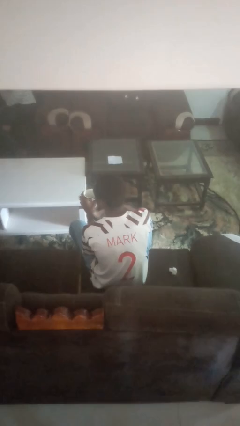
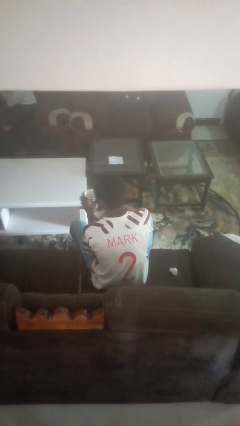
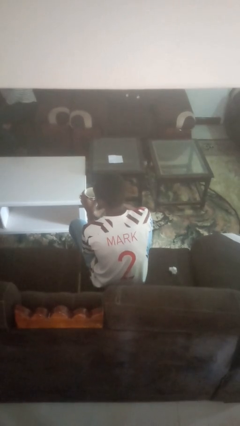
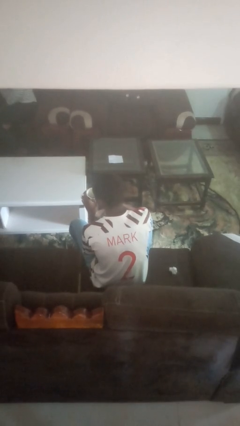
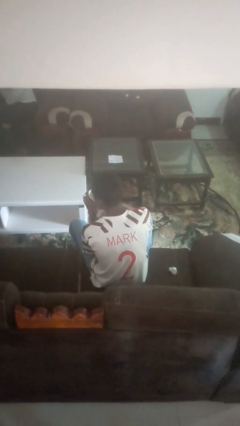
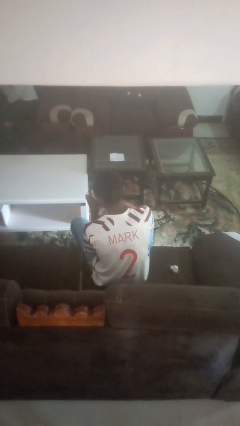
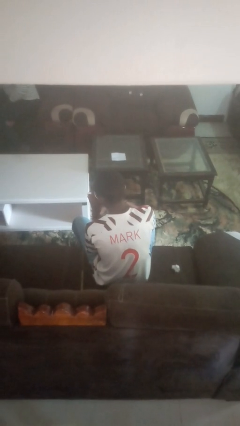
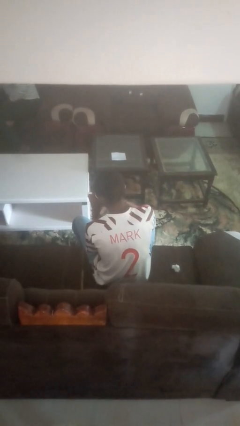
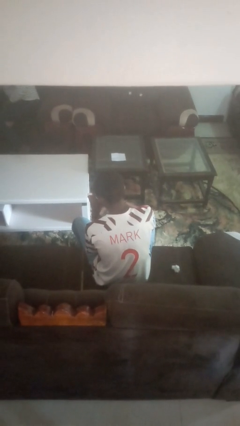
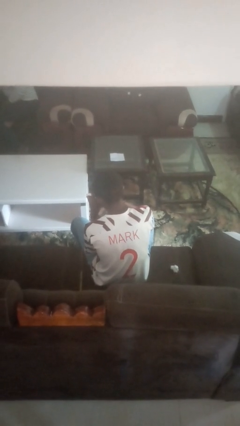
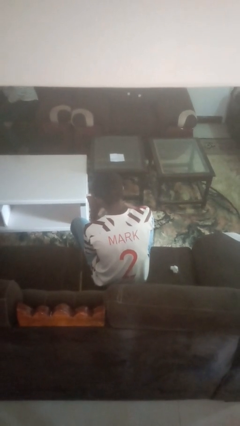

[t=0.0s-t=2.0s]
person drinks from mug

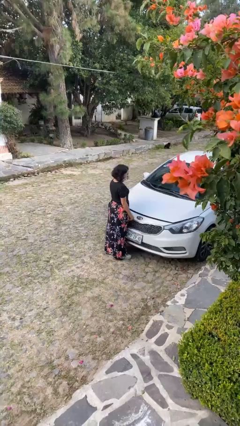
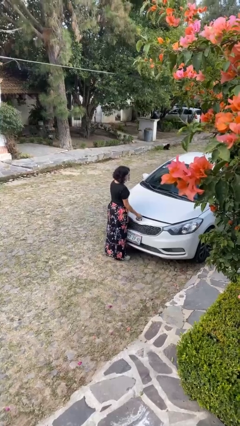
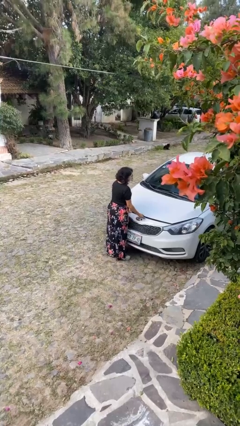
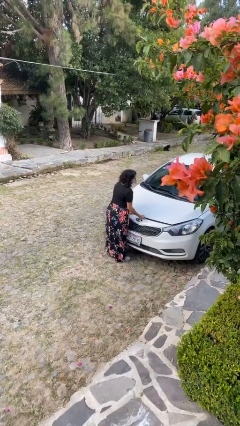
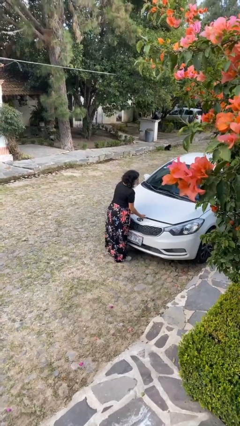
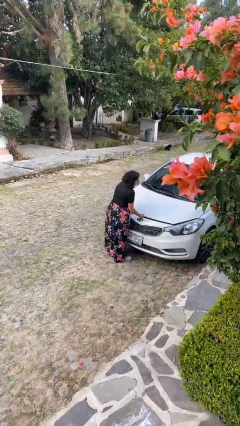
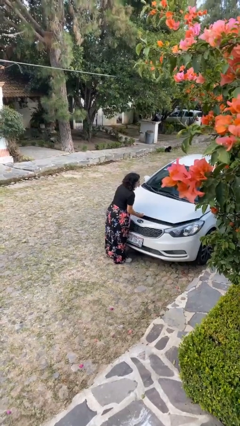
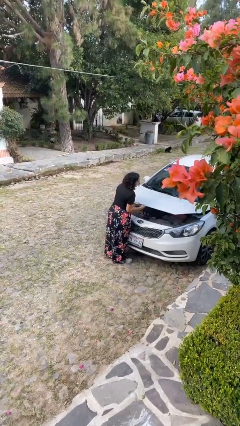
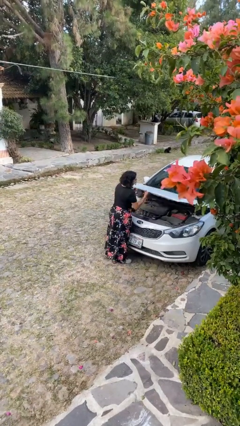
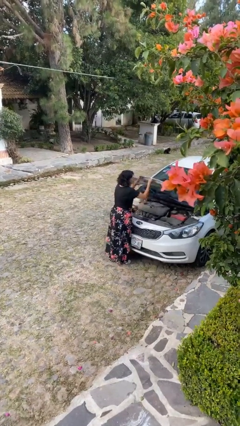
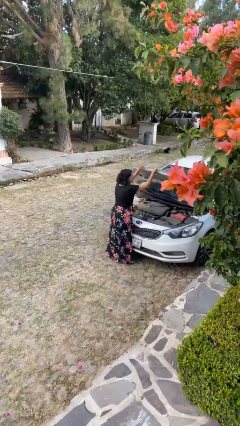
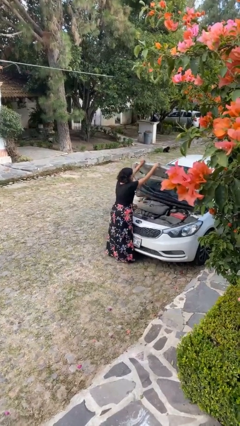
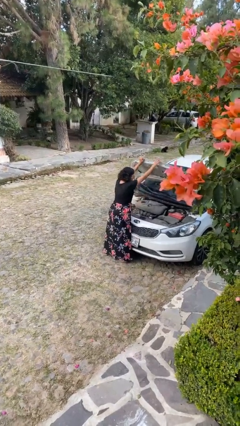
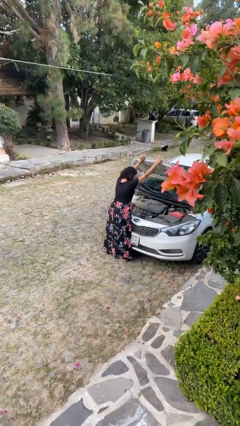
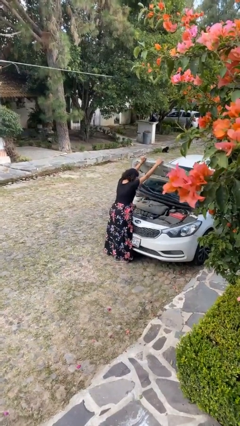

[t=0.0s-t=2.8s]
person opens car hood

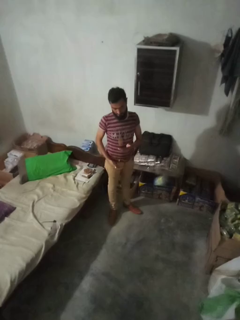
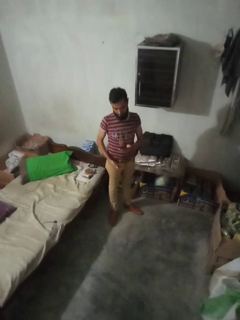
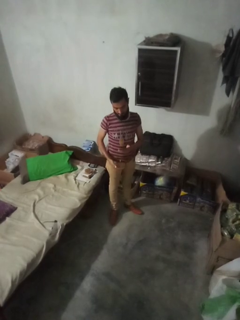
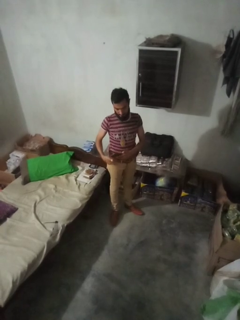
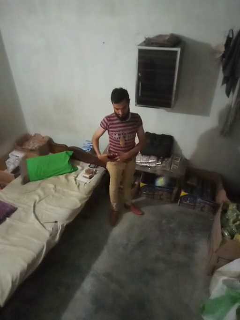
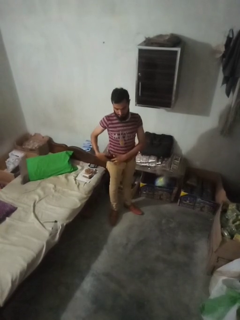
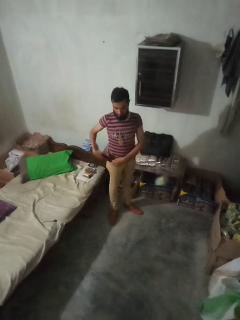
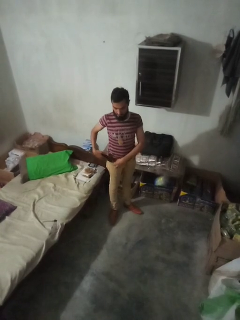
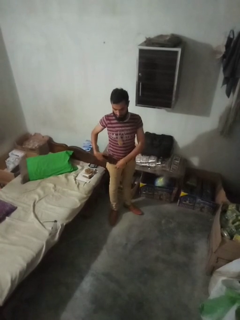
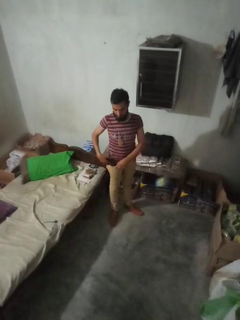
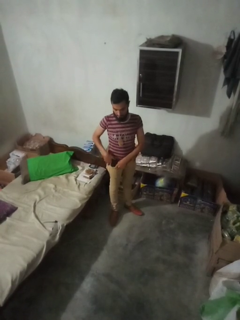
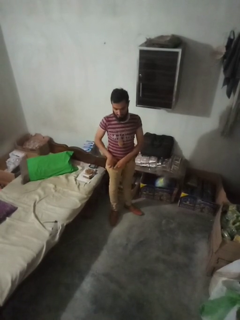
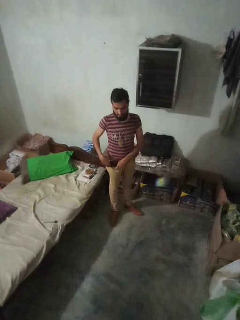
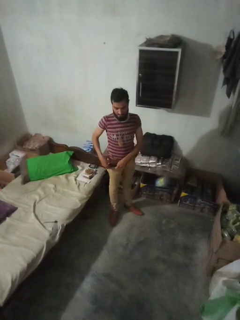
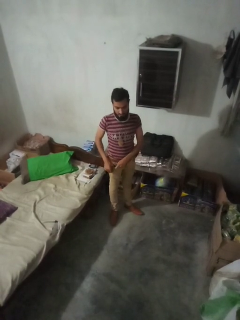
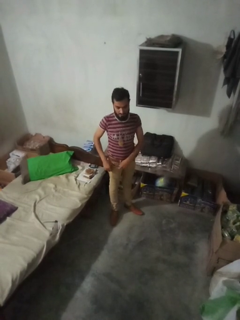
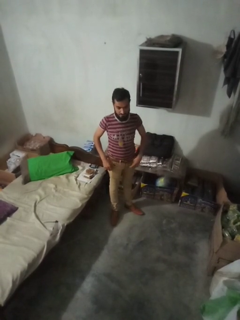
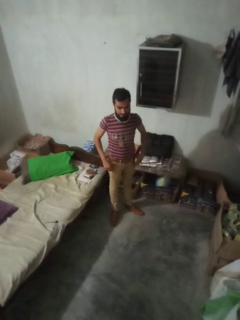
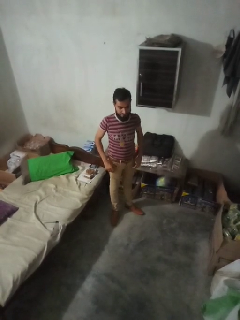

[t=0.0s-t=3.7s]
person puts phone into pocket

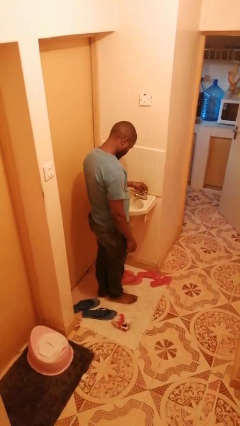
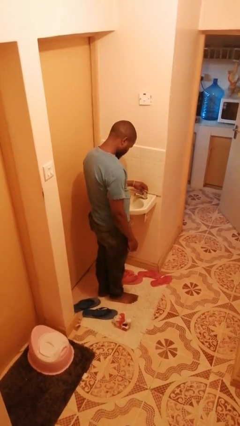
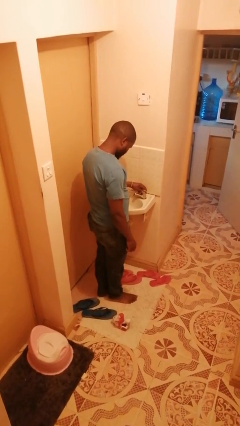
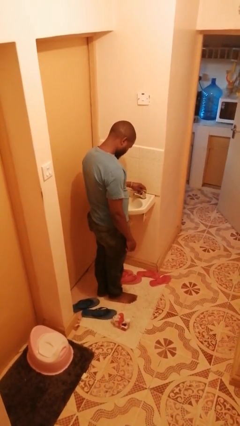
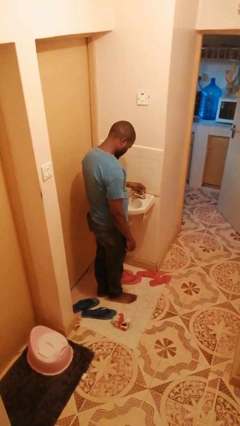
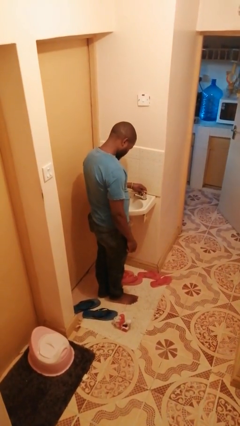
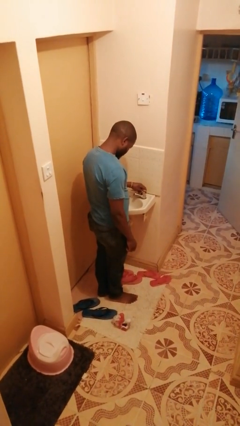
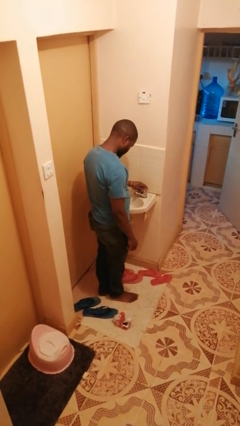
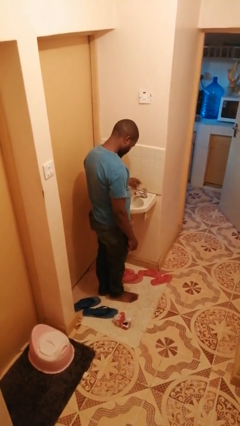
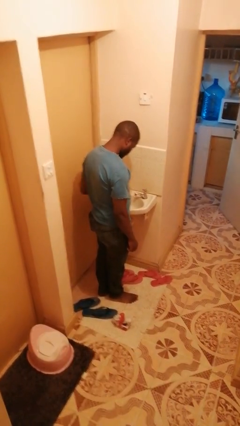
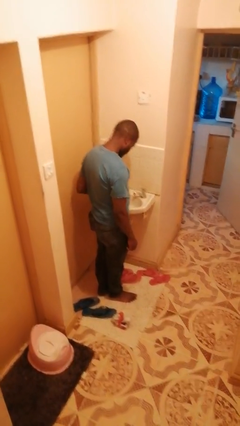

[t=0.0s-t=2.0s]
person turns off faucet

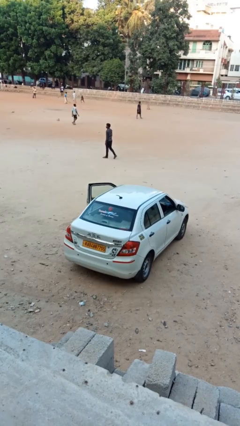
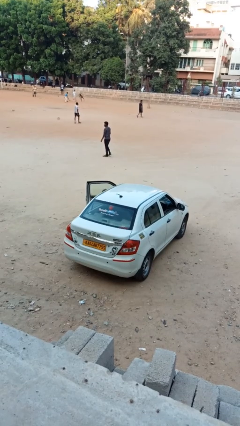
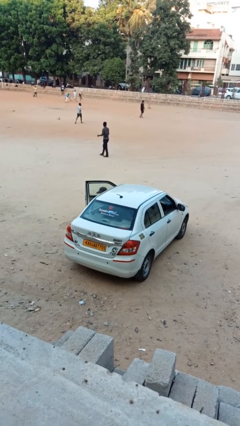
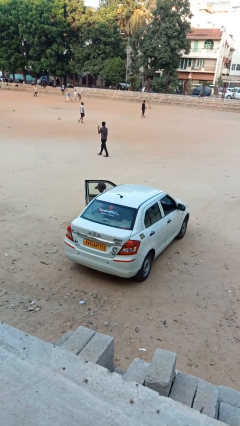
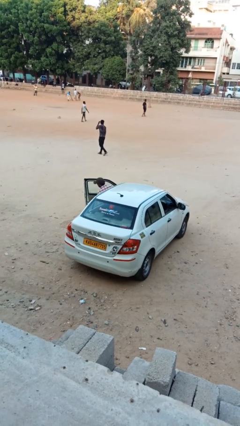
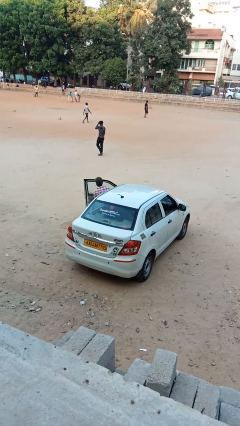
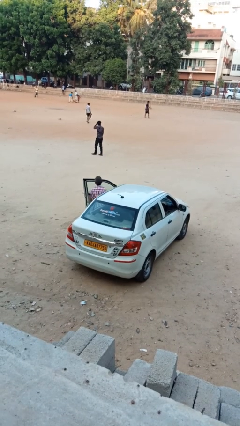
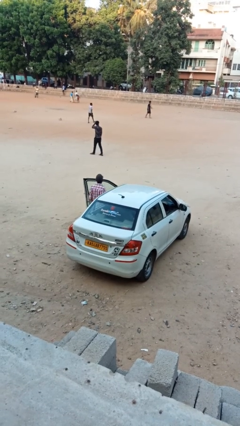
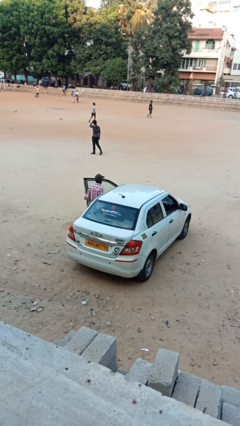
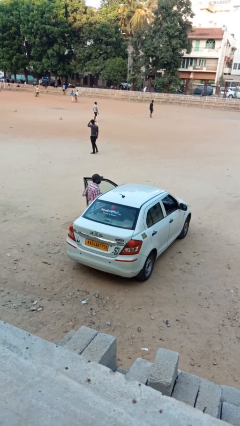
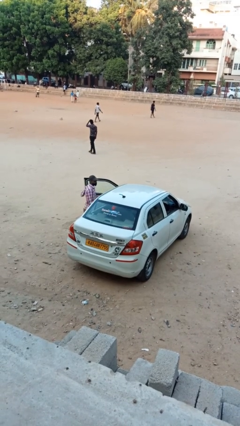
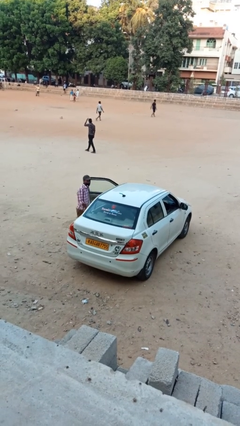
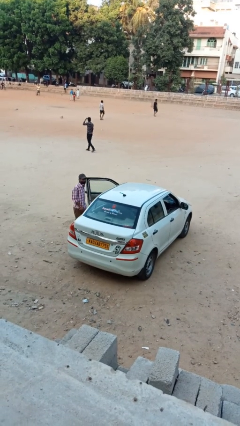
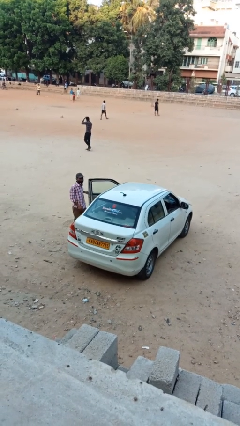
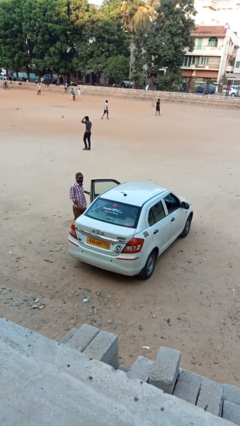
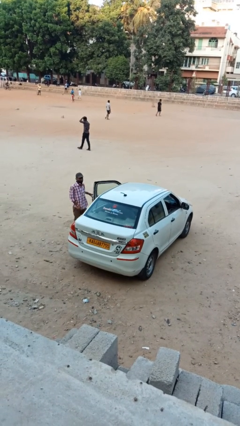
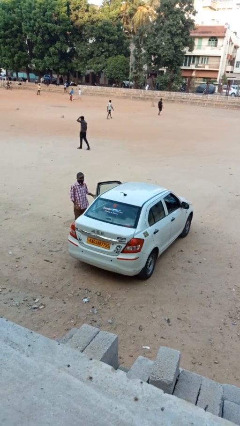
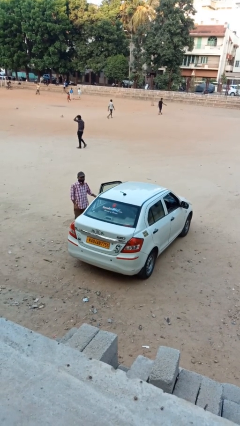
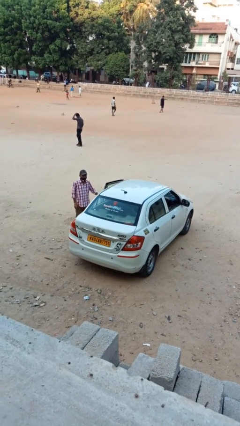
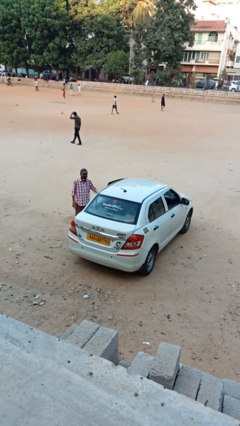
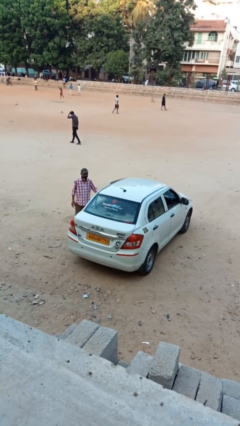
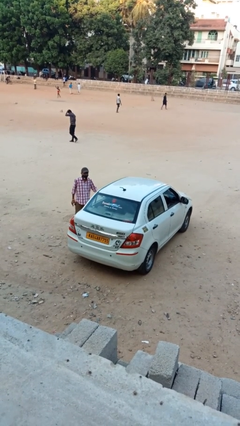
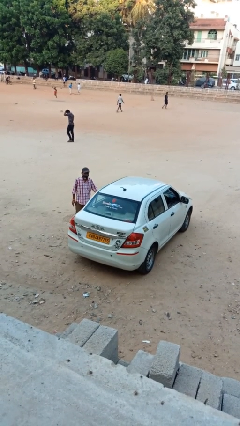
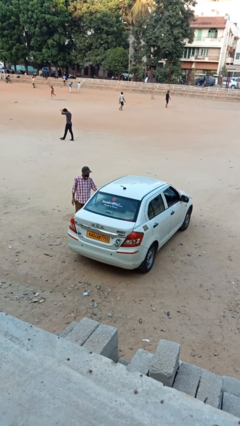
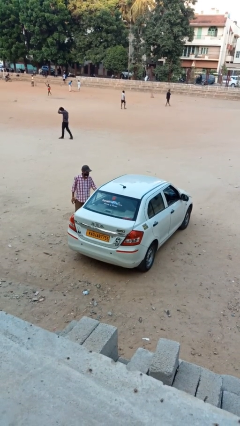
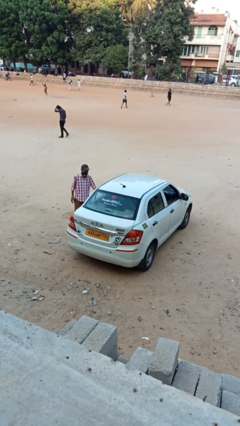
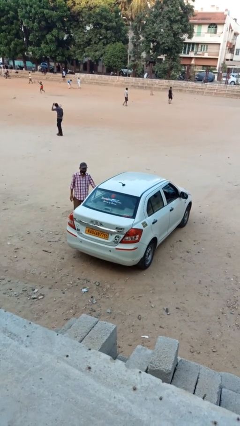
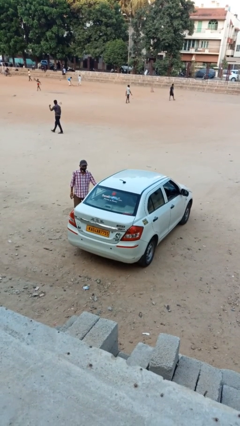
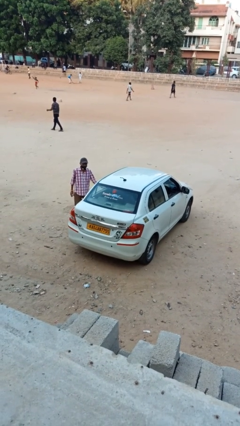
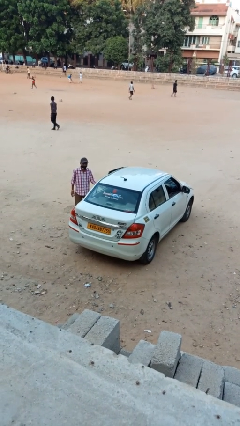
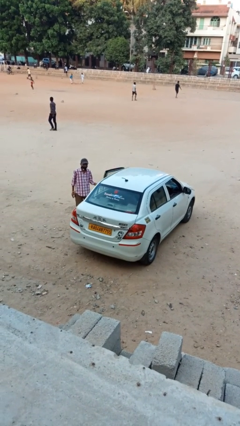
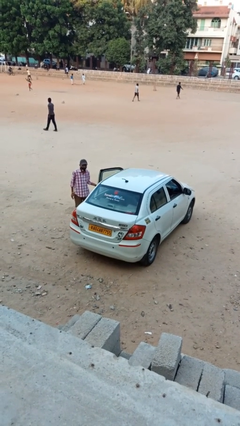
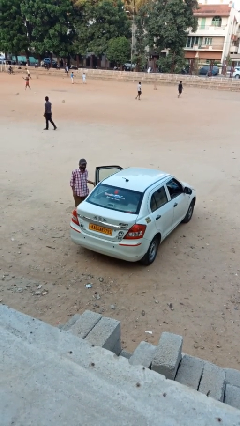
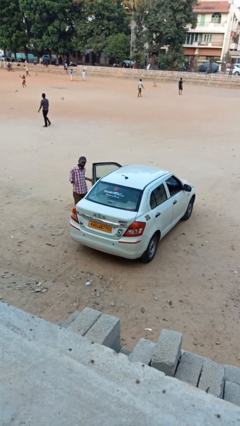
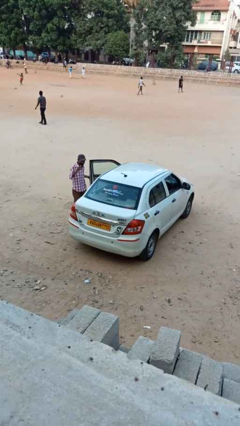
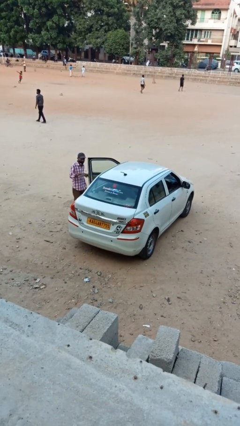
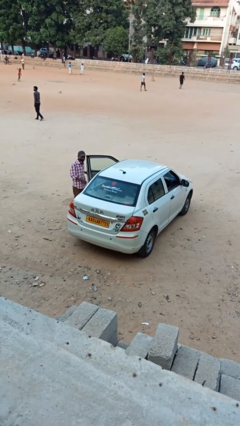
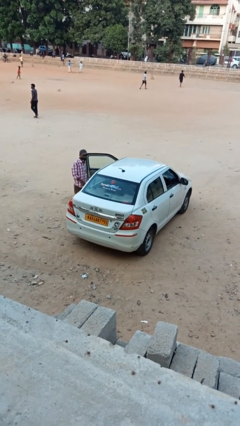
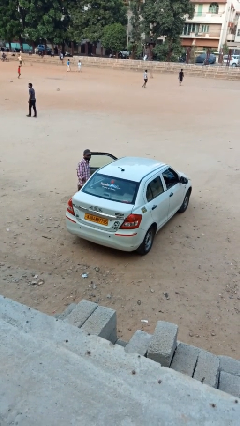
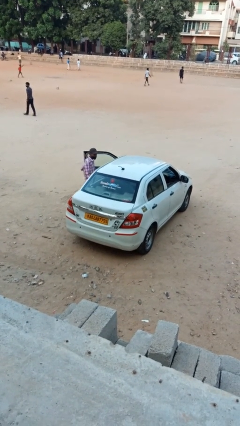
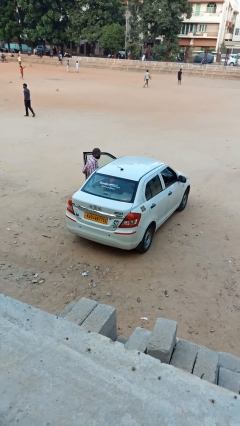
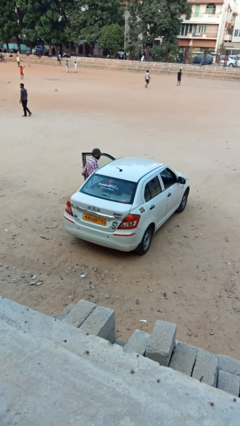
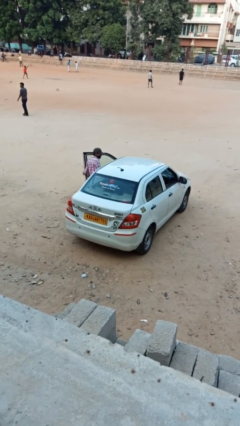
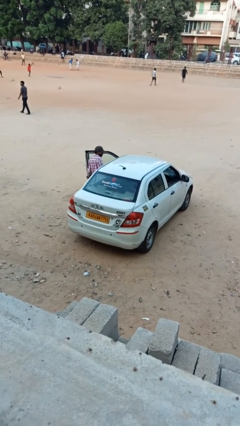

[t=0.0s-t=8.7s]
car drops off person
